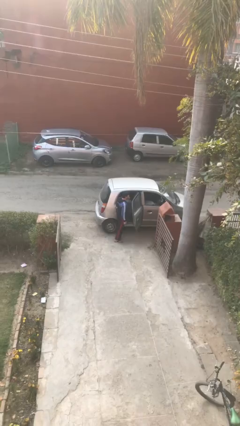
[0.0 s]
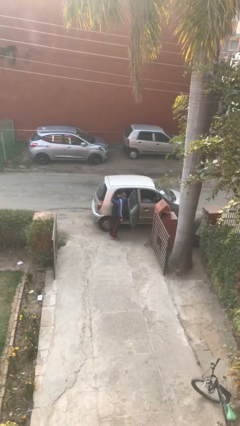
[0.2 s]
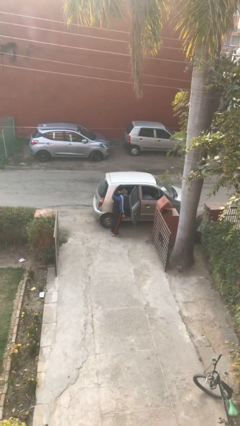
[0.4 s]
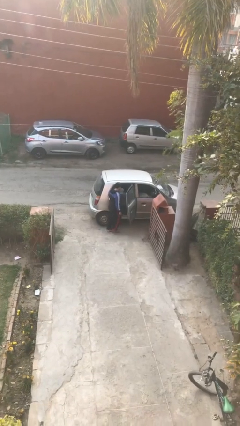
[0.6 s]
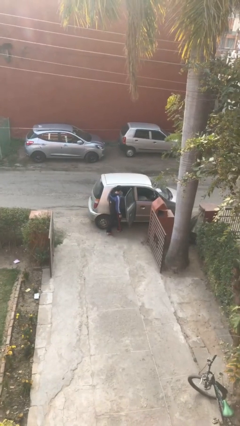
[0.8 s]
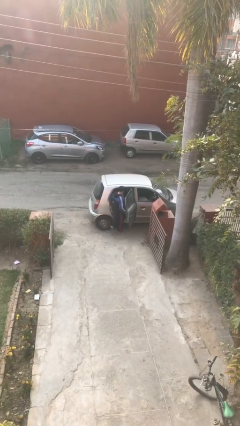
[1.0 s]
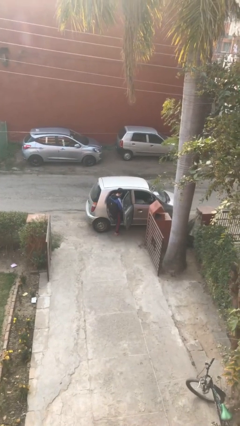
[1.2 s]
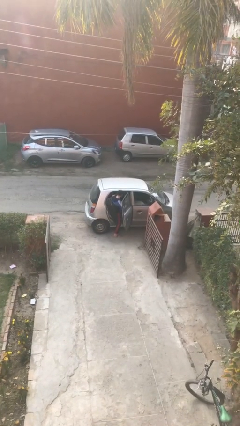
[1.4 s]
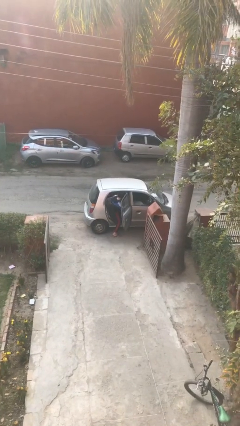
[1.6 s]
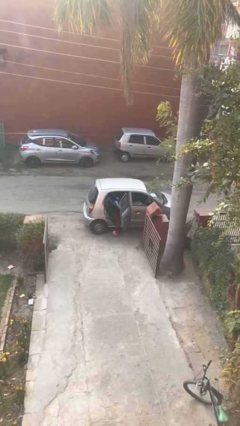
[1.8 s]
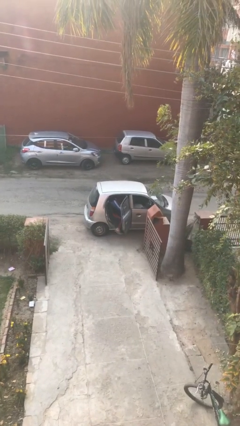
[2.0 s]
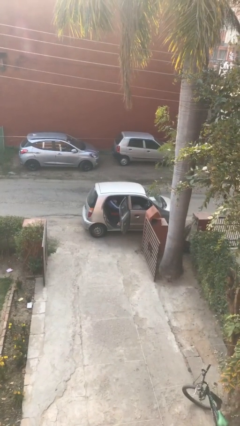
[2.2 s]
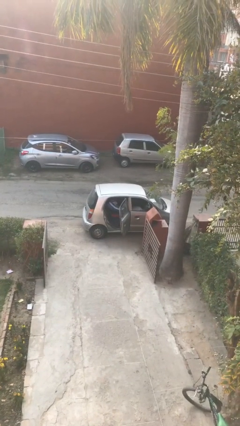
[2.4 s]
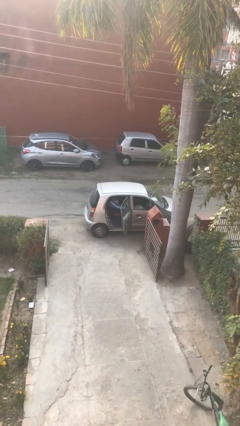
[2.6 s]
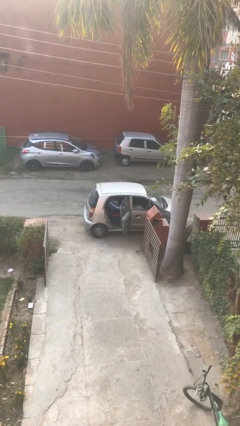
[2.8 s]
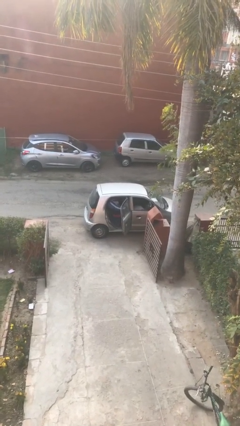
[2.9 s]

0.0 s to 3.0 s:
person enters car

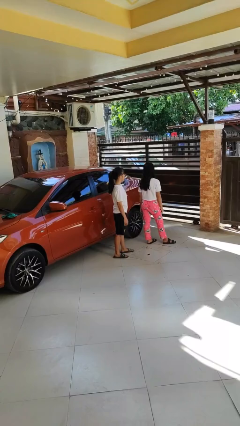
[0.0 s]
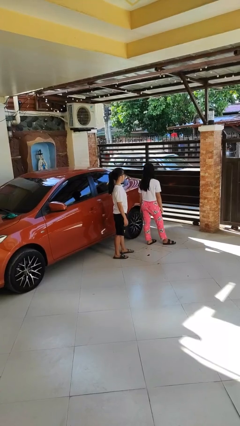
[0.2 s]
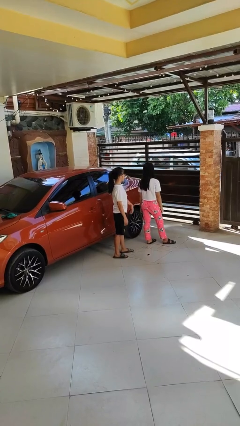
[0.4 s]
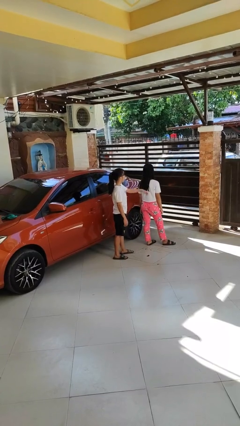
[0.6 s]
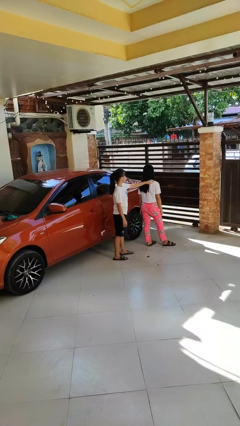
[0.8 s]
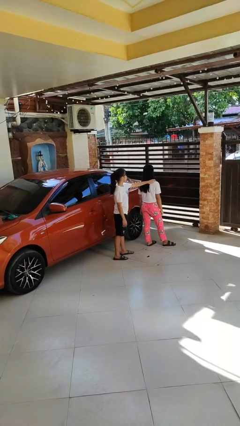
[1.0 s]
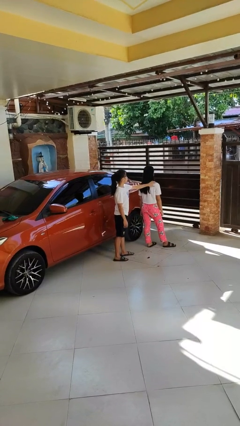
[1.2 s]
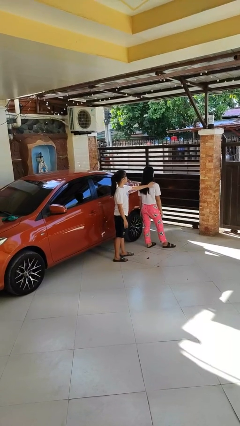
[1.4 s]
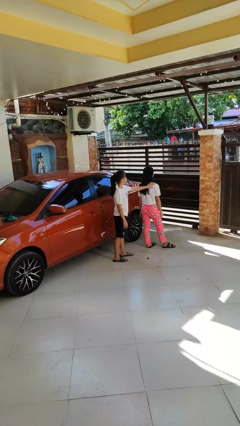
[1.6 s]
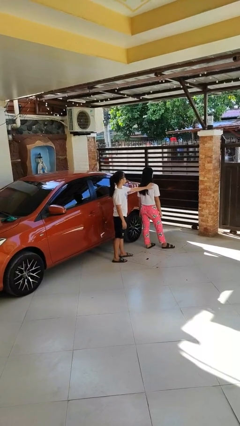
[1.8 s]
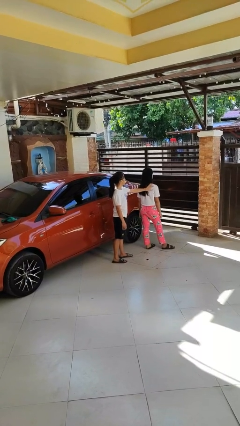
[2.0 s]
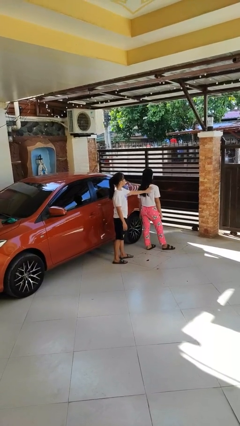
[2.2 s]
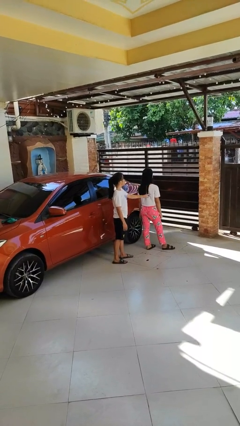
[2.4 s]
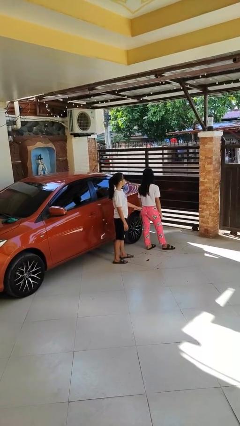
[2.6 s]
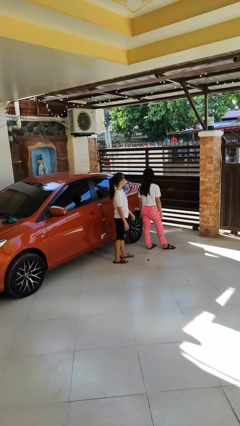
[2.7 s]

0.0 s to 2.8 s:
person touches back of person

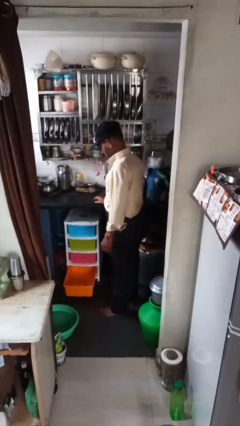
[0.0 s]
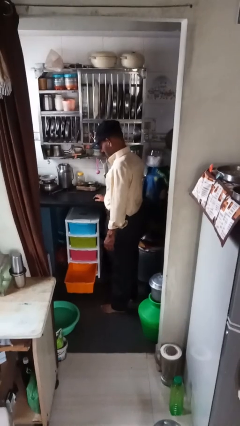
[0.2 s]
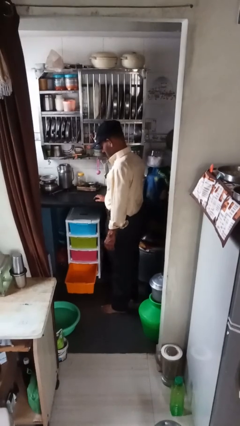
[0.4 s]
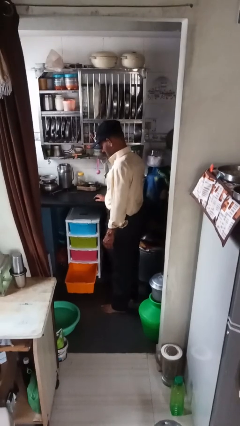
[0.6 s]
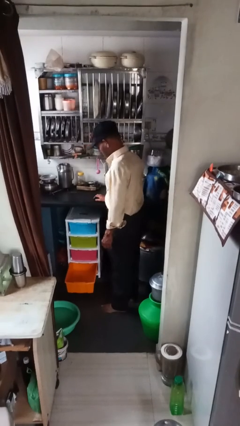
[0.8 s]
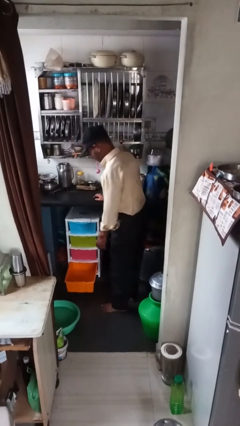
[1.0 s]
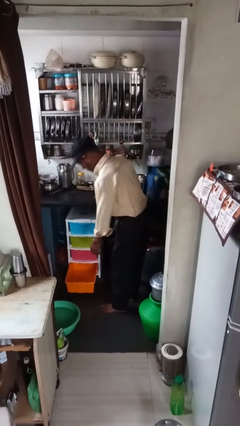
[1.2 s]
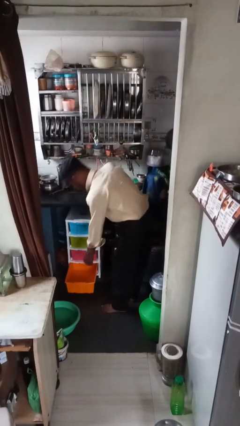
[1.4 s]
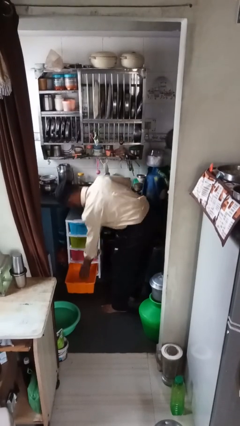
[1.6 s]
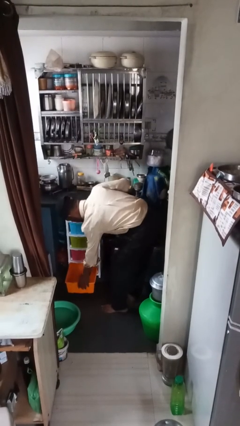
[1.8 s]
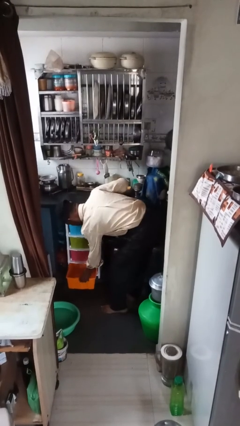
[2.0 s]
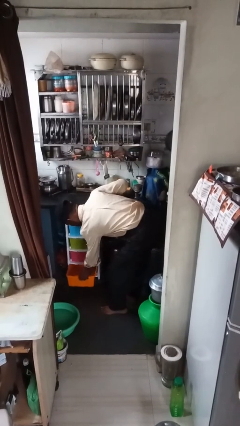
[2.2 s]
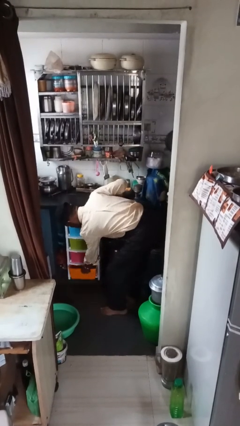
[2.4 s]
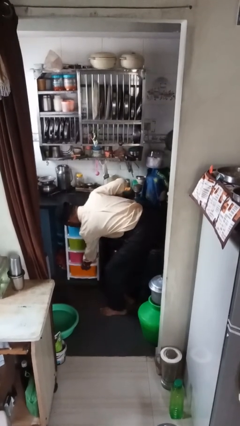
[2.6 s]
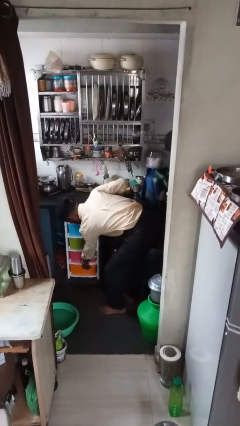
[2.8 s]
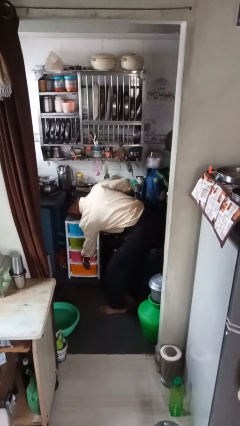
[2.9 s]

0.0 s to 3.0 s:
person closes kitchen drawer

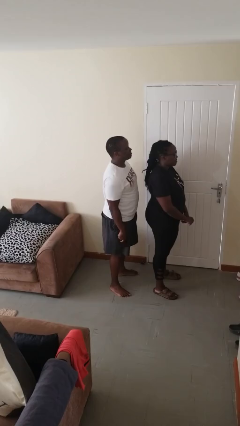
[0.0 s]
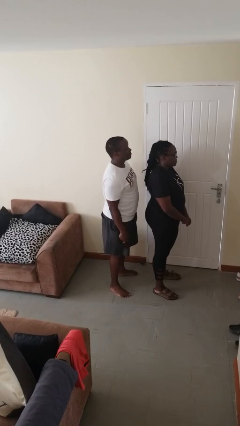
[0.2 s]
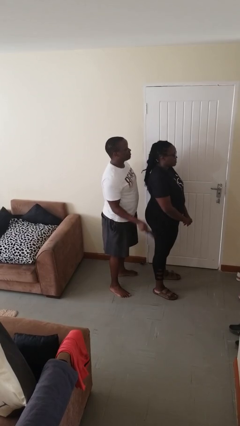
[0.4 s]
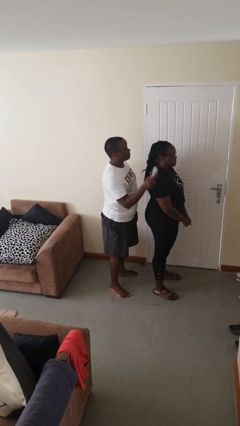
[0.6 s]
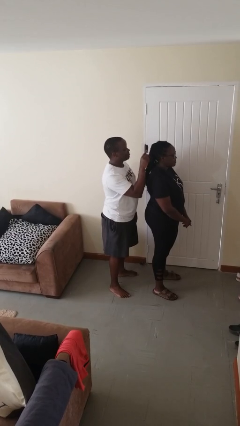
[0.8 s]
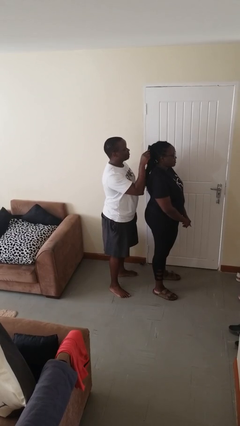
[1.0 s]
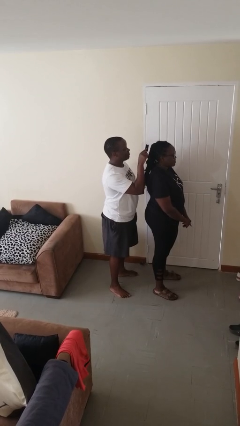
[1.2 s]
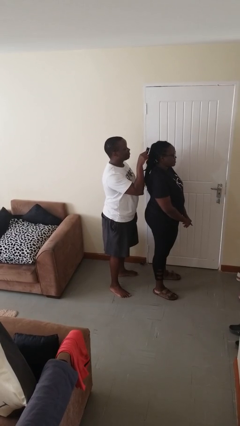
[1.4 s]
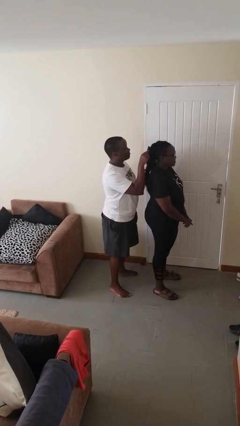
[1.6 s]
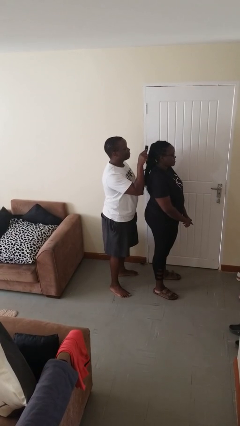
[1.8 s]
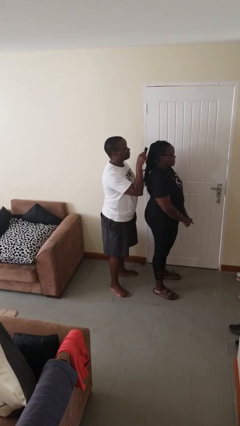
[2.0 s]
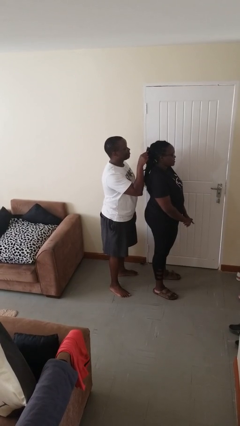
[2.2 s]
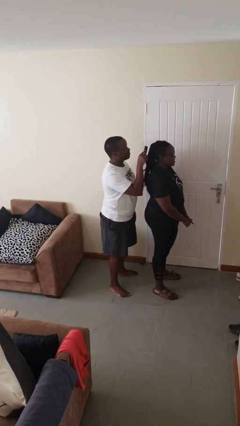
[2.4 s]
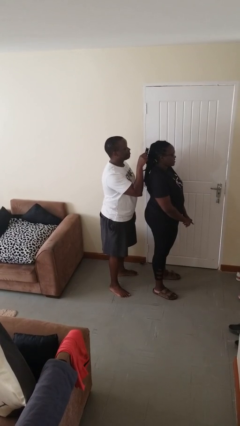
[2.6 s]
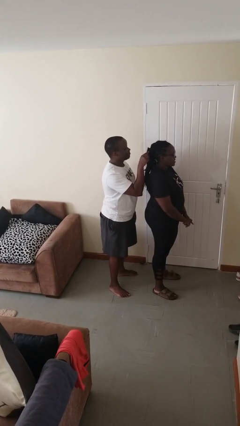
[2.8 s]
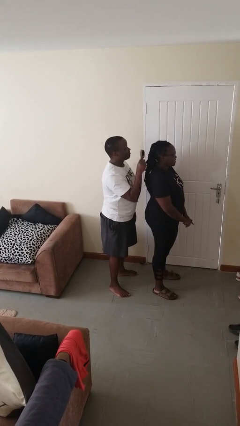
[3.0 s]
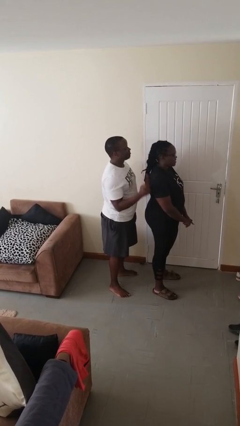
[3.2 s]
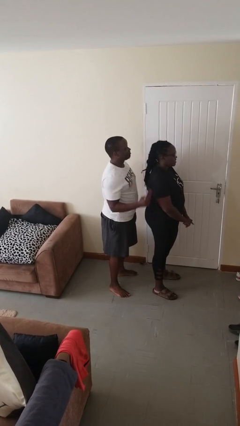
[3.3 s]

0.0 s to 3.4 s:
person brushes hair of person

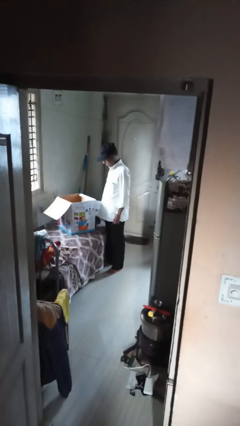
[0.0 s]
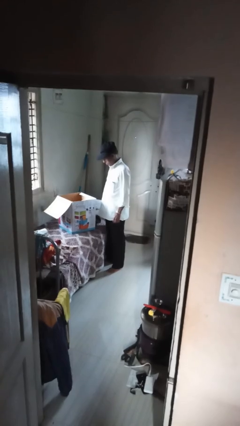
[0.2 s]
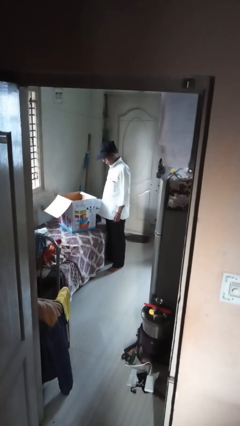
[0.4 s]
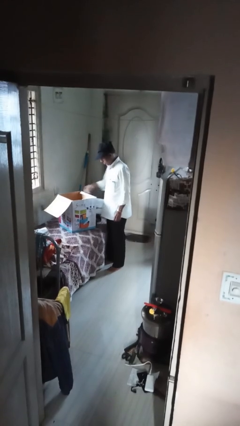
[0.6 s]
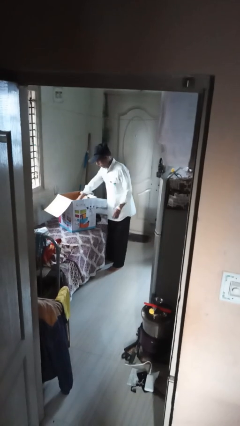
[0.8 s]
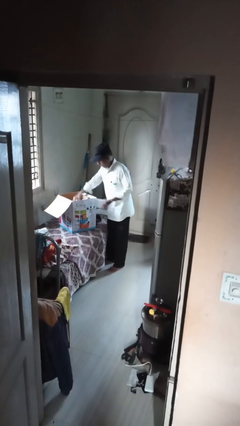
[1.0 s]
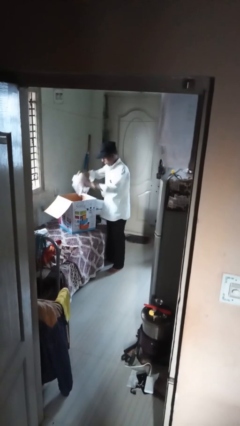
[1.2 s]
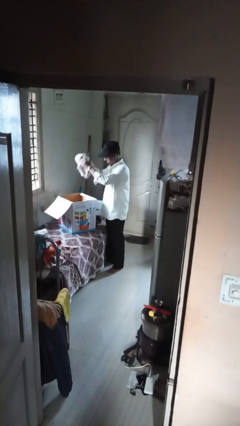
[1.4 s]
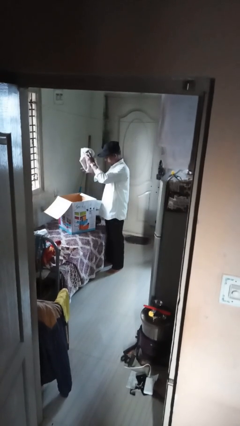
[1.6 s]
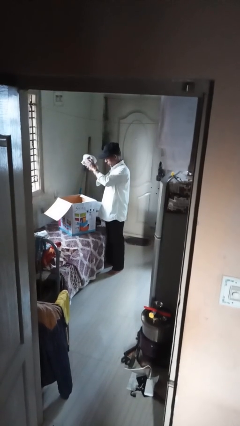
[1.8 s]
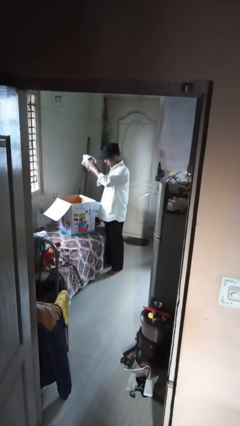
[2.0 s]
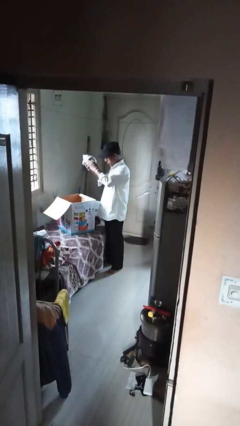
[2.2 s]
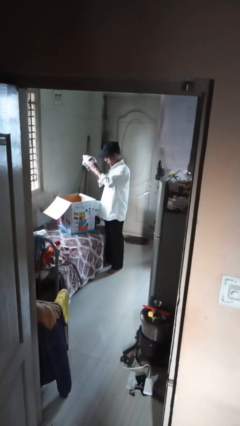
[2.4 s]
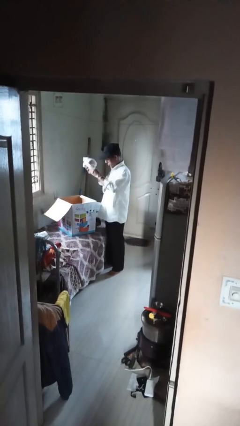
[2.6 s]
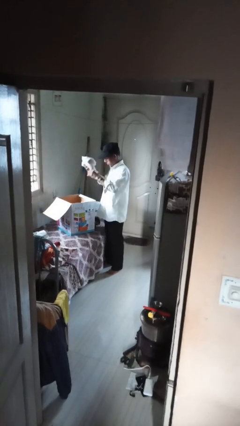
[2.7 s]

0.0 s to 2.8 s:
person takes object from box

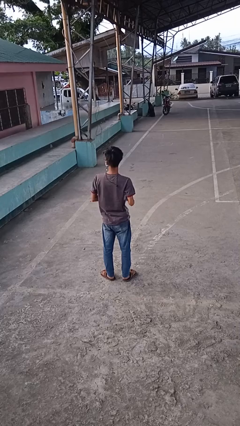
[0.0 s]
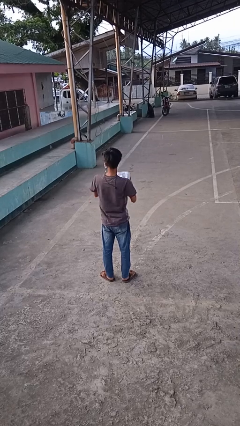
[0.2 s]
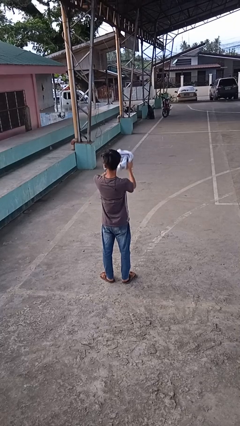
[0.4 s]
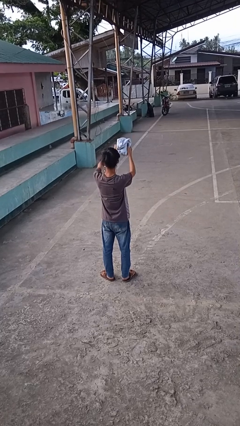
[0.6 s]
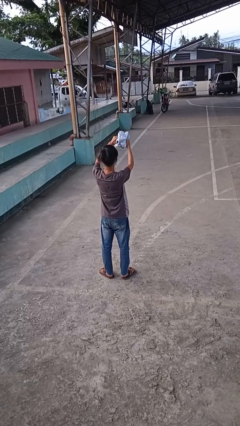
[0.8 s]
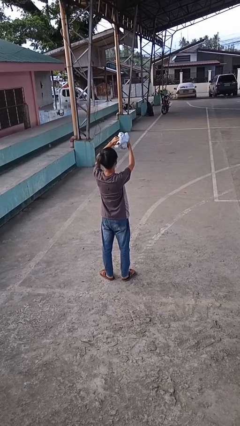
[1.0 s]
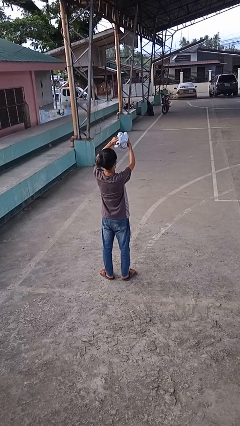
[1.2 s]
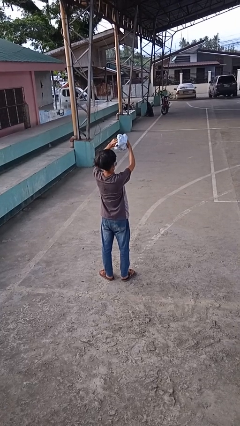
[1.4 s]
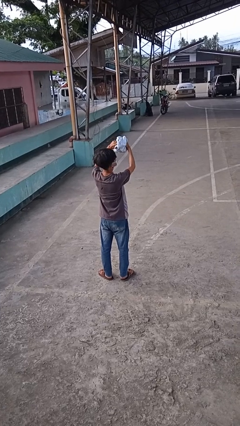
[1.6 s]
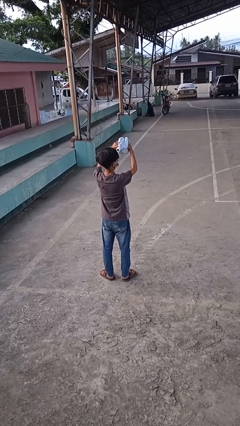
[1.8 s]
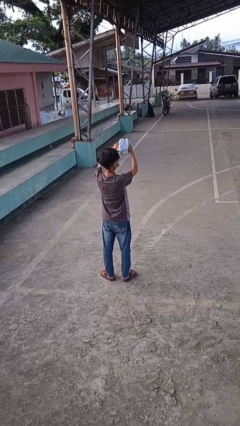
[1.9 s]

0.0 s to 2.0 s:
person squeezes object

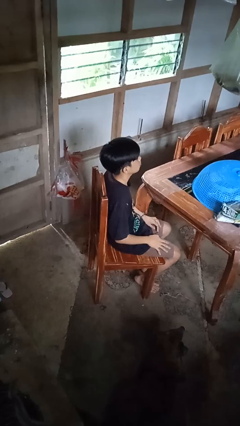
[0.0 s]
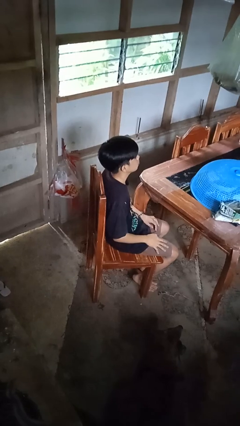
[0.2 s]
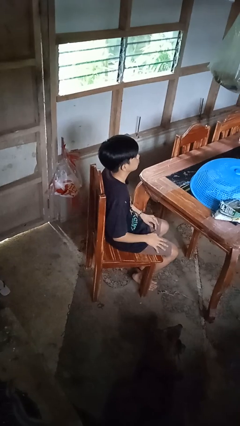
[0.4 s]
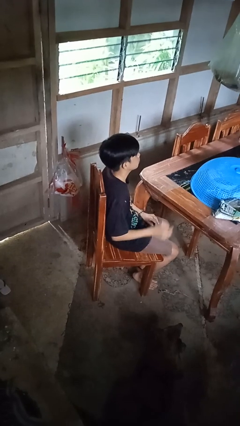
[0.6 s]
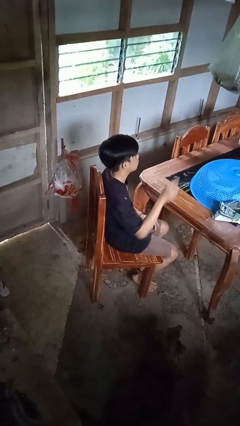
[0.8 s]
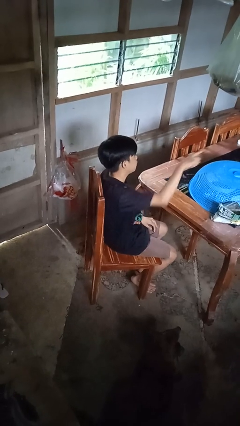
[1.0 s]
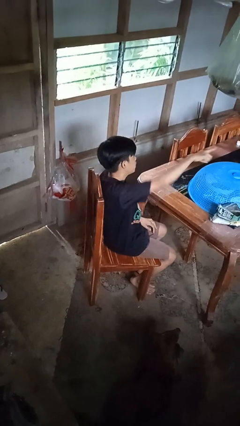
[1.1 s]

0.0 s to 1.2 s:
person points at person
